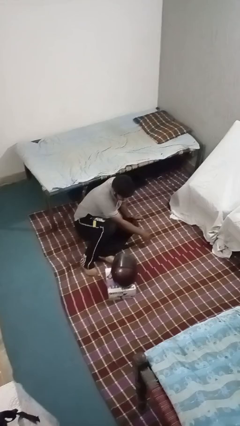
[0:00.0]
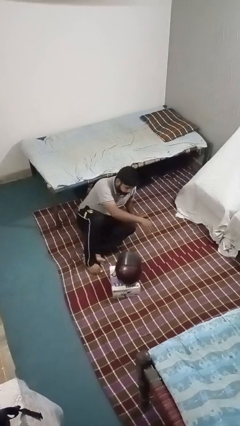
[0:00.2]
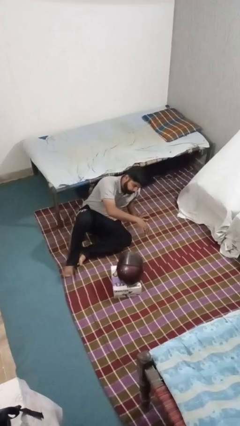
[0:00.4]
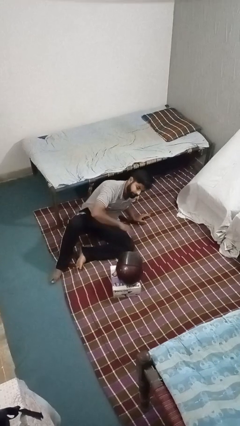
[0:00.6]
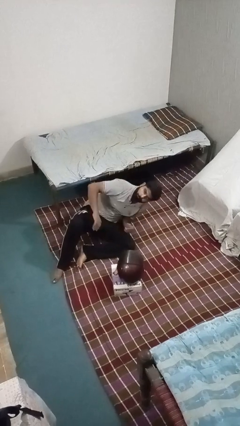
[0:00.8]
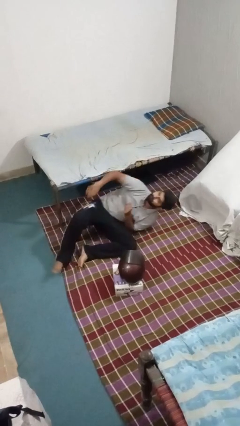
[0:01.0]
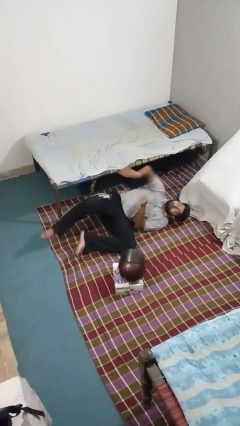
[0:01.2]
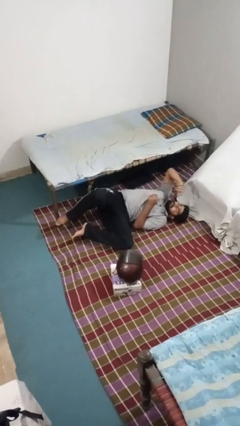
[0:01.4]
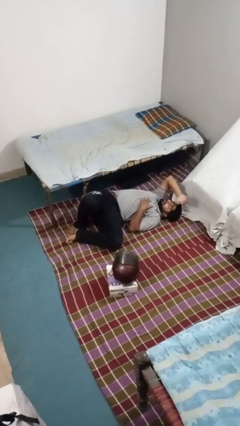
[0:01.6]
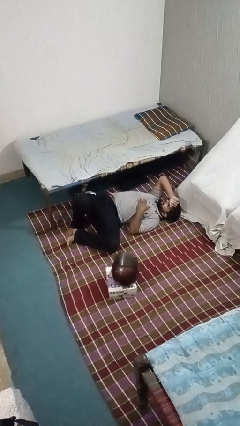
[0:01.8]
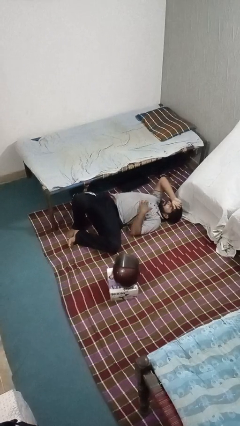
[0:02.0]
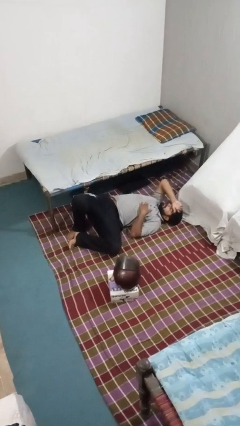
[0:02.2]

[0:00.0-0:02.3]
person lies down on floor

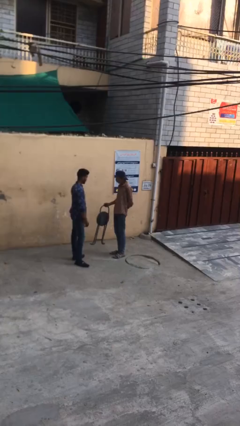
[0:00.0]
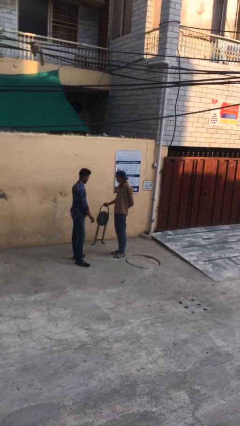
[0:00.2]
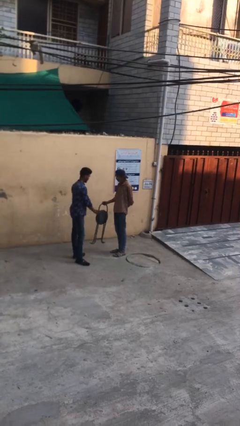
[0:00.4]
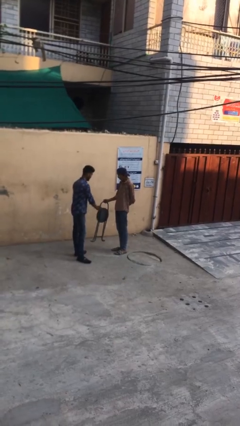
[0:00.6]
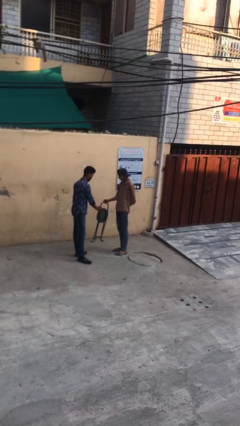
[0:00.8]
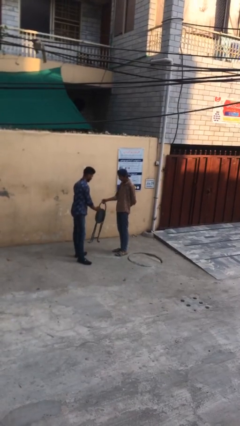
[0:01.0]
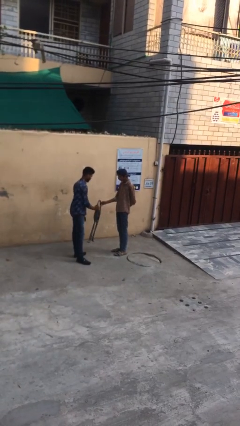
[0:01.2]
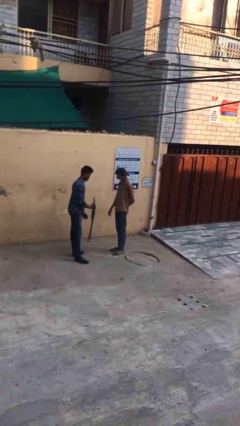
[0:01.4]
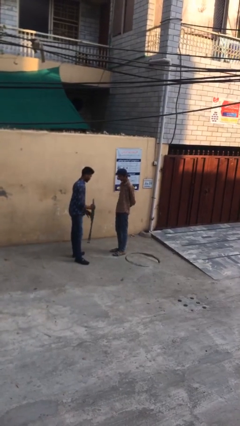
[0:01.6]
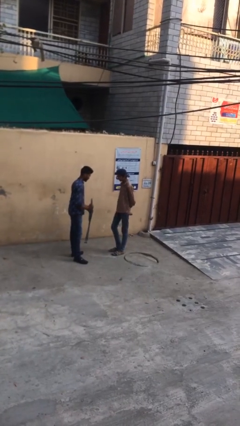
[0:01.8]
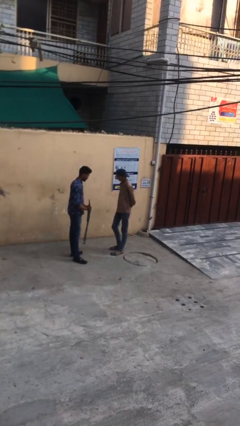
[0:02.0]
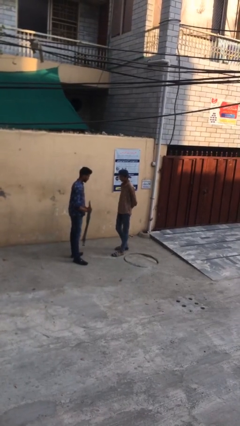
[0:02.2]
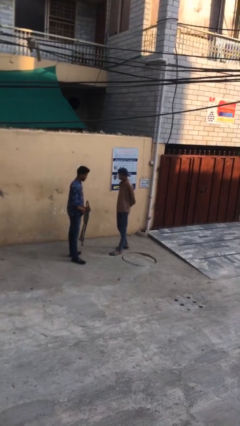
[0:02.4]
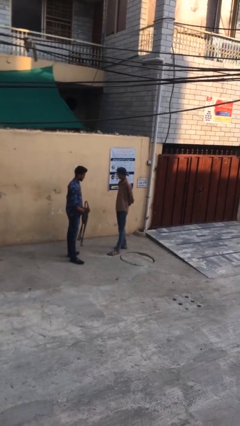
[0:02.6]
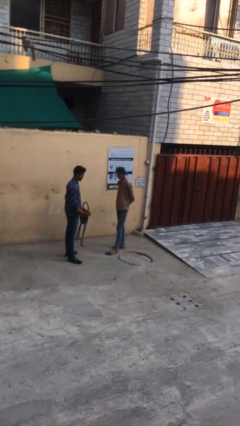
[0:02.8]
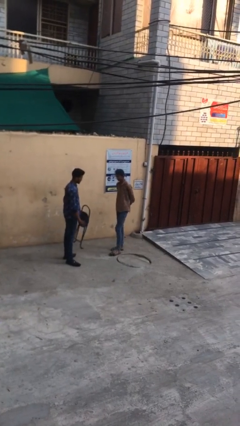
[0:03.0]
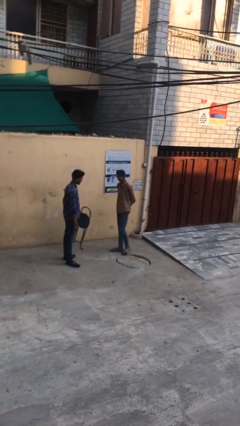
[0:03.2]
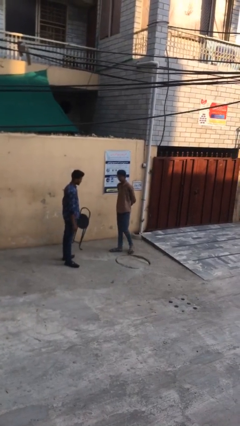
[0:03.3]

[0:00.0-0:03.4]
person transfers object to person

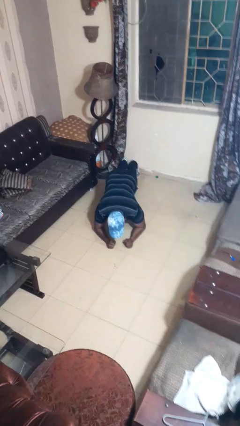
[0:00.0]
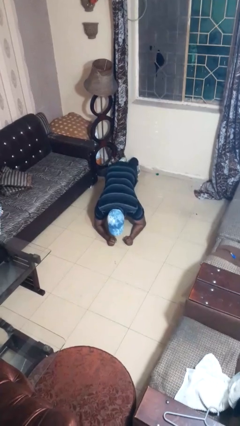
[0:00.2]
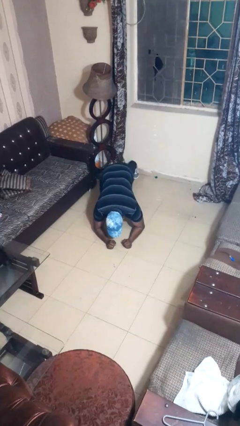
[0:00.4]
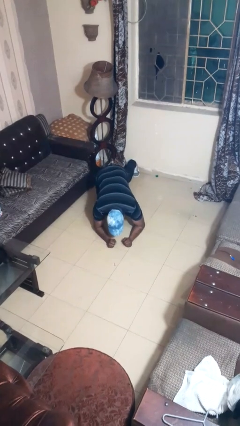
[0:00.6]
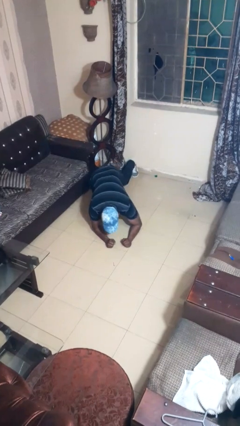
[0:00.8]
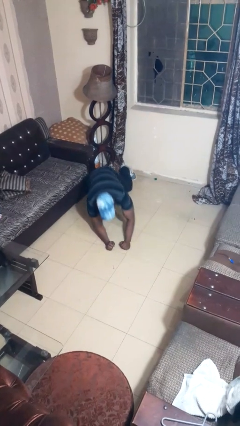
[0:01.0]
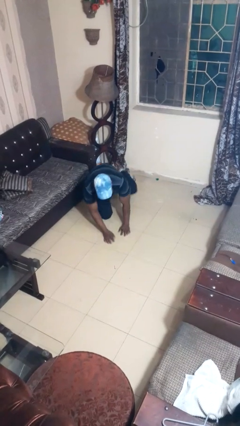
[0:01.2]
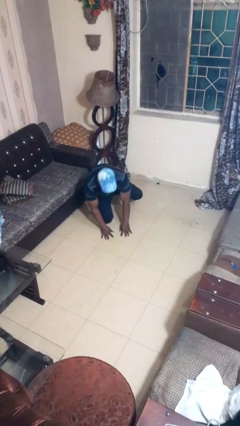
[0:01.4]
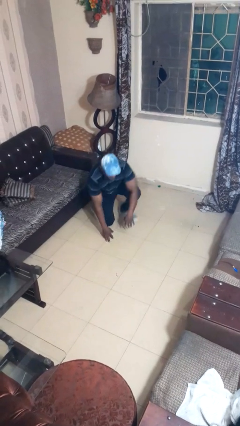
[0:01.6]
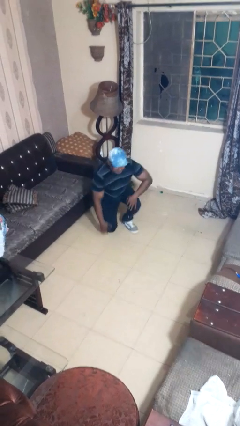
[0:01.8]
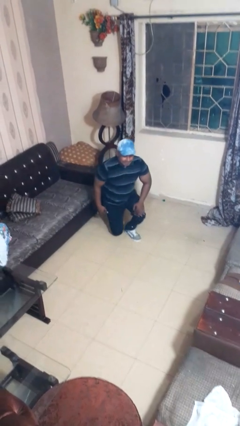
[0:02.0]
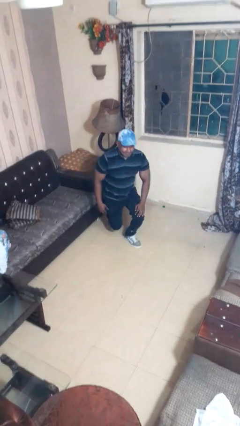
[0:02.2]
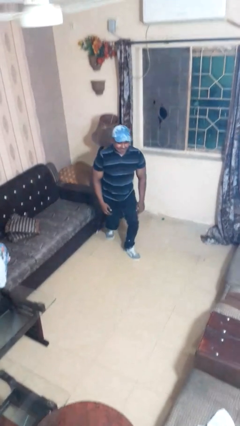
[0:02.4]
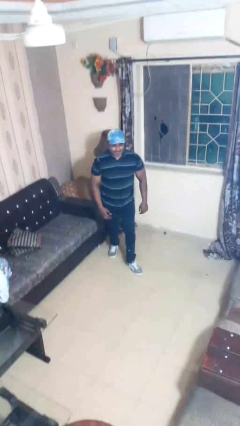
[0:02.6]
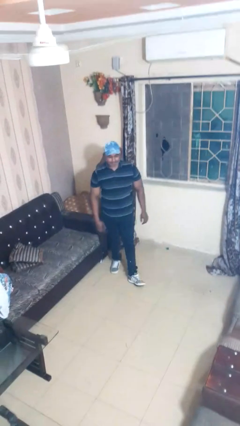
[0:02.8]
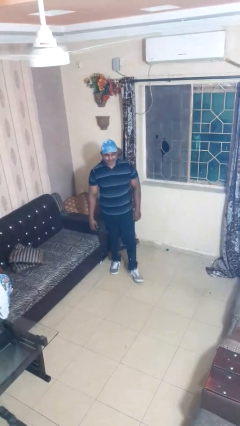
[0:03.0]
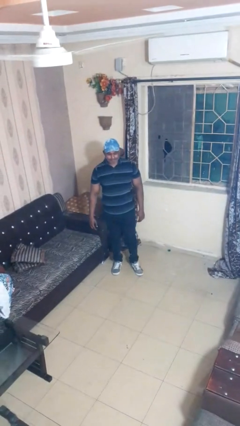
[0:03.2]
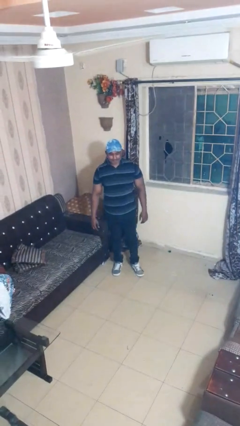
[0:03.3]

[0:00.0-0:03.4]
person stands up from floor

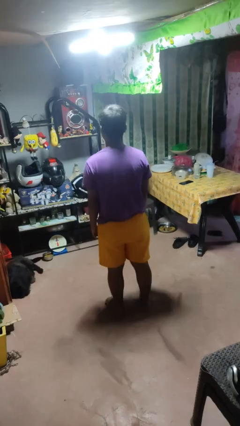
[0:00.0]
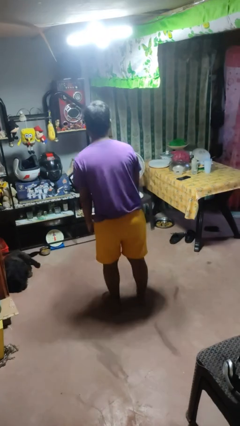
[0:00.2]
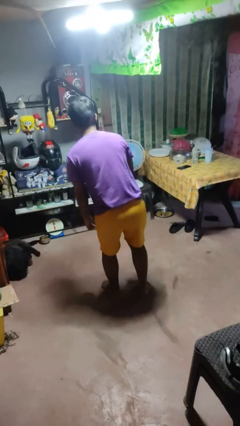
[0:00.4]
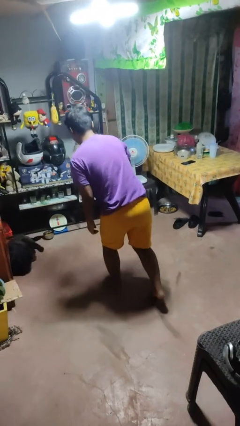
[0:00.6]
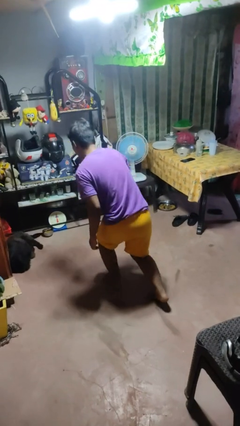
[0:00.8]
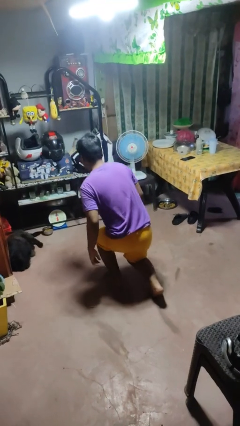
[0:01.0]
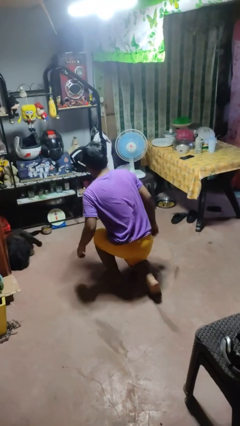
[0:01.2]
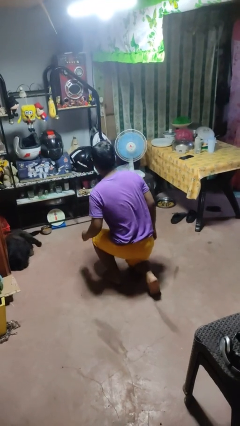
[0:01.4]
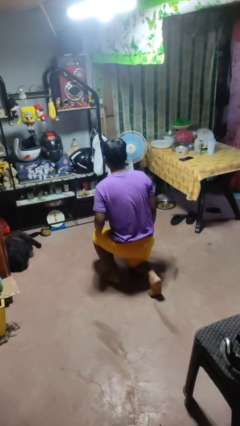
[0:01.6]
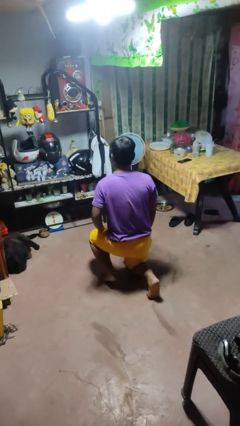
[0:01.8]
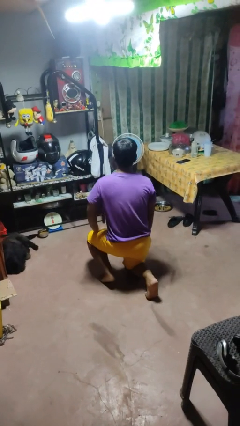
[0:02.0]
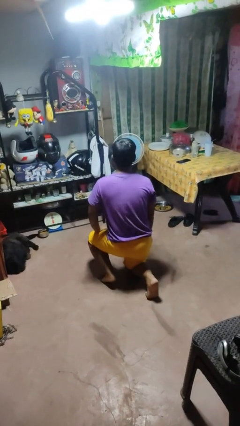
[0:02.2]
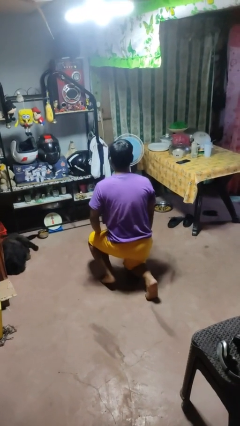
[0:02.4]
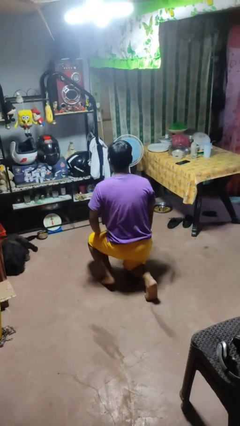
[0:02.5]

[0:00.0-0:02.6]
person kneels

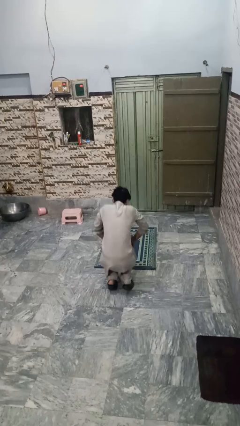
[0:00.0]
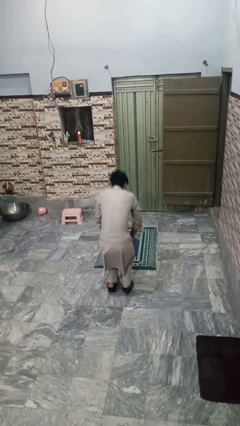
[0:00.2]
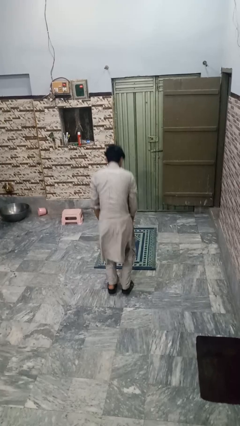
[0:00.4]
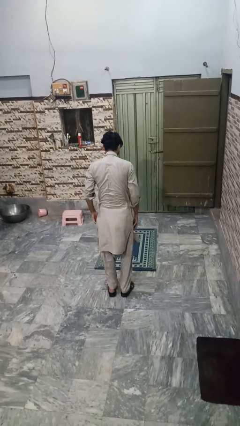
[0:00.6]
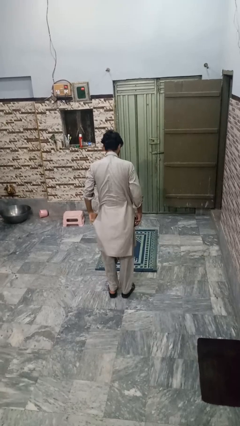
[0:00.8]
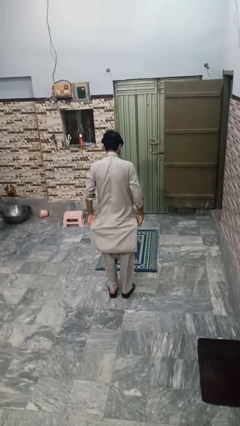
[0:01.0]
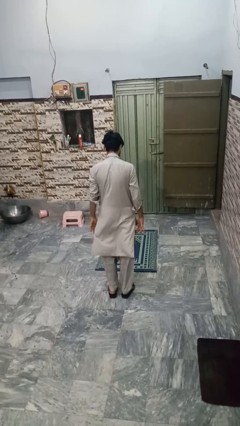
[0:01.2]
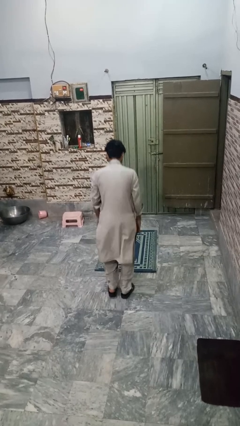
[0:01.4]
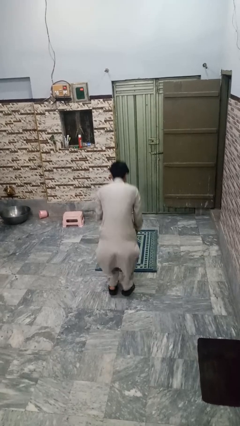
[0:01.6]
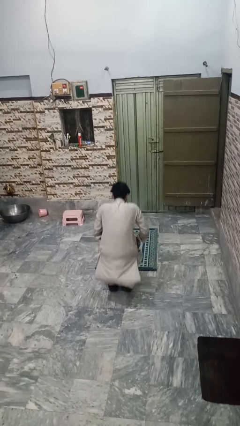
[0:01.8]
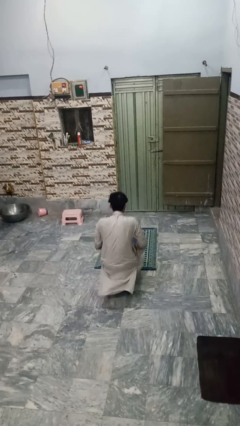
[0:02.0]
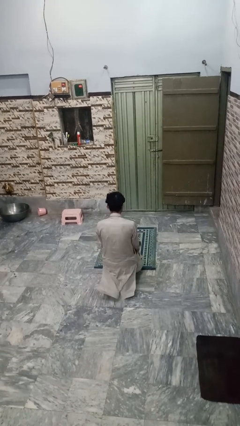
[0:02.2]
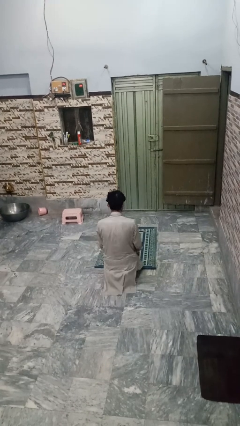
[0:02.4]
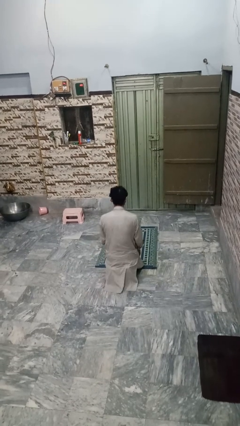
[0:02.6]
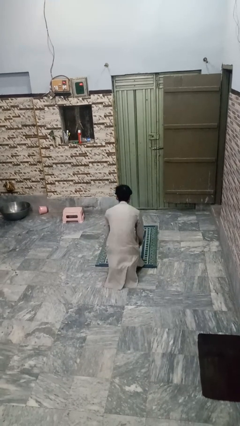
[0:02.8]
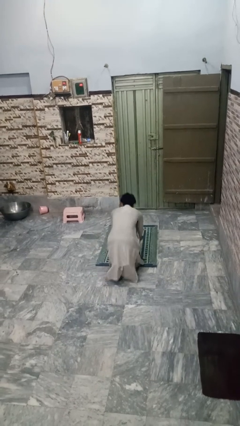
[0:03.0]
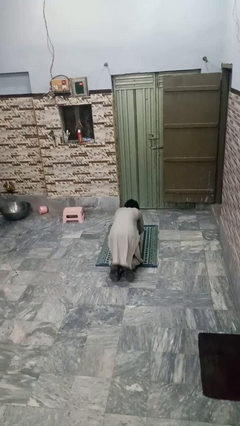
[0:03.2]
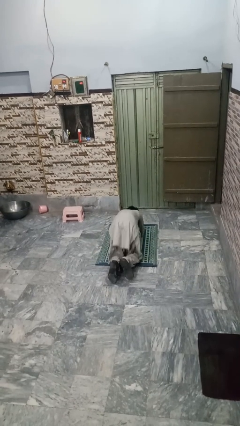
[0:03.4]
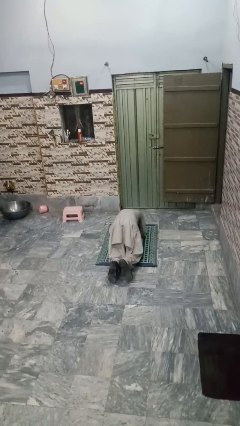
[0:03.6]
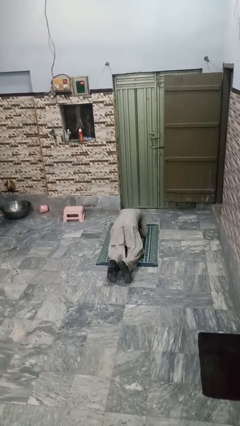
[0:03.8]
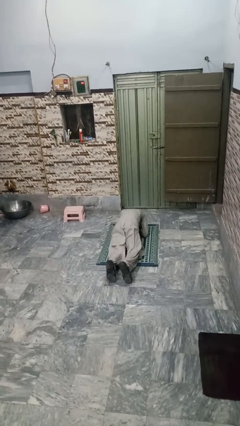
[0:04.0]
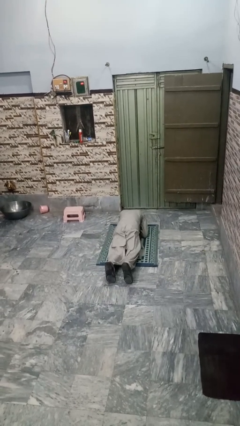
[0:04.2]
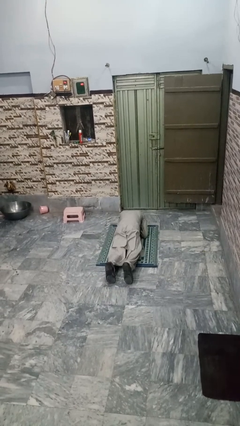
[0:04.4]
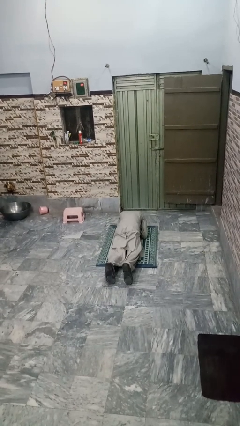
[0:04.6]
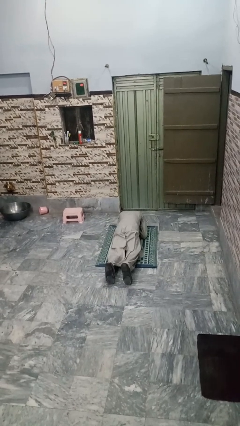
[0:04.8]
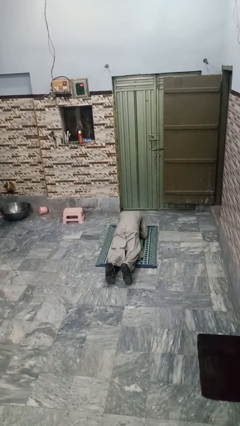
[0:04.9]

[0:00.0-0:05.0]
person exercises with plank

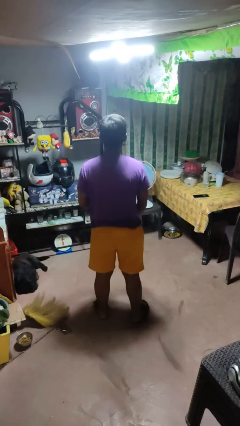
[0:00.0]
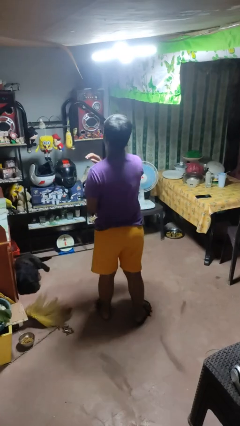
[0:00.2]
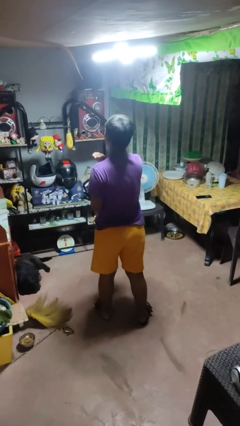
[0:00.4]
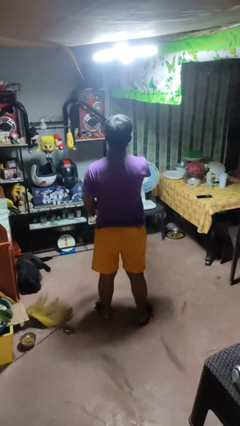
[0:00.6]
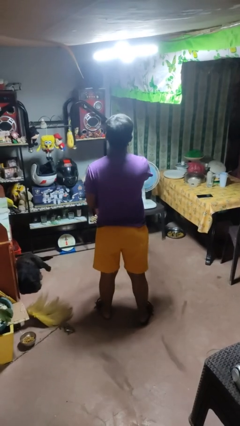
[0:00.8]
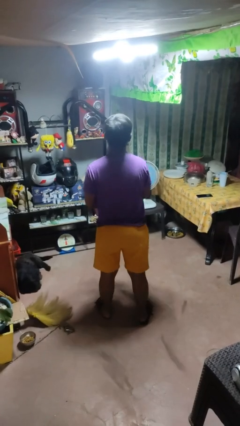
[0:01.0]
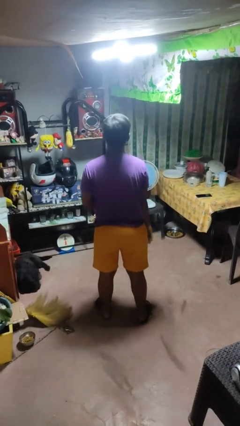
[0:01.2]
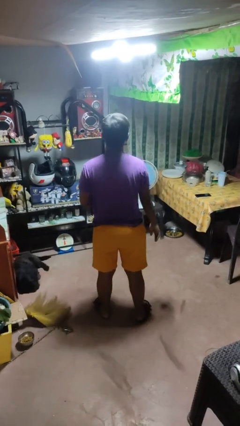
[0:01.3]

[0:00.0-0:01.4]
person karate chop
